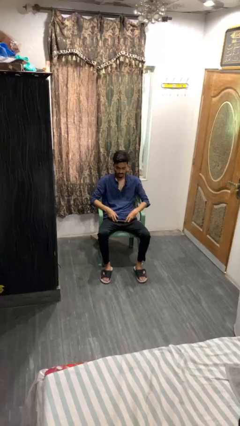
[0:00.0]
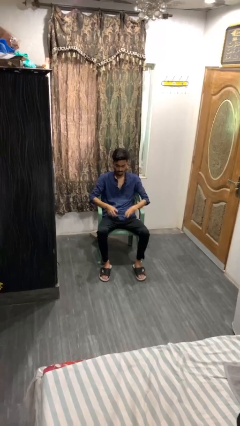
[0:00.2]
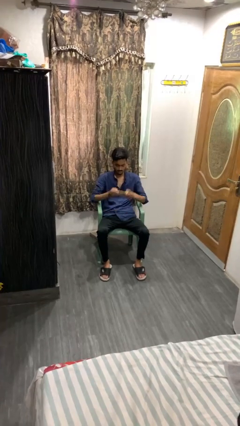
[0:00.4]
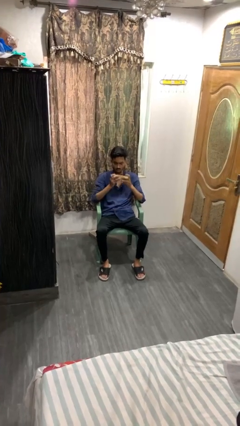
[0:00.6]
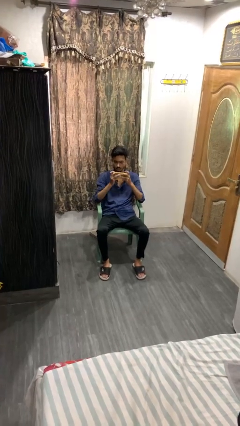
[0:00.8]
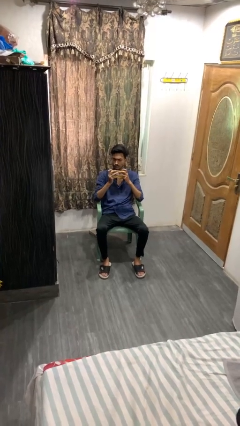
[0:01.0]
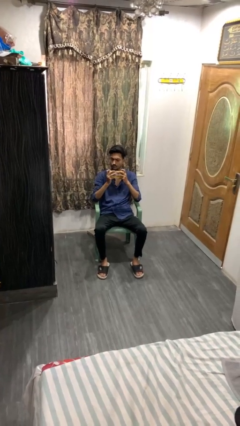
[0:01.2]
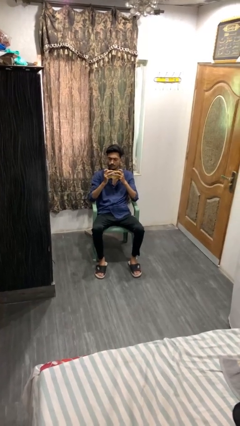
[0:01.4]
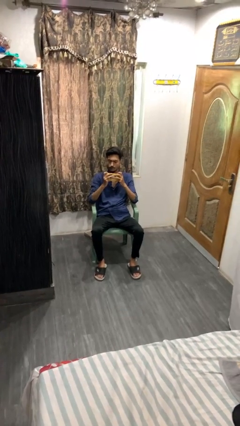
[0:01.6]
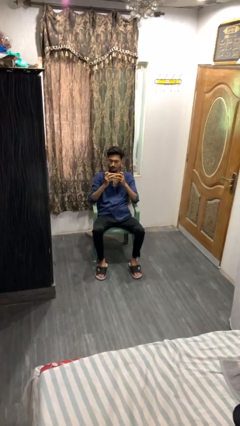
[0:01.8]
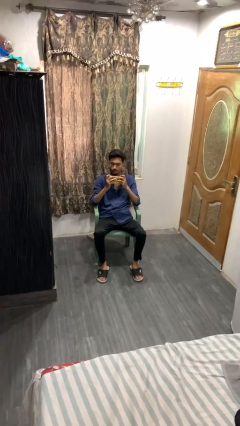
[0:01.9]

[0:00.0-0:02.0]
person interacts with handheld game

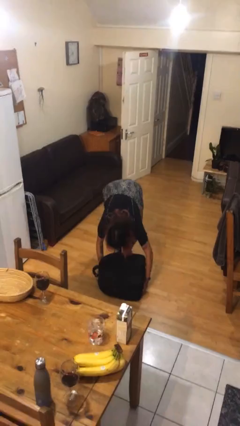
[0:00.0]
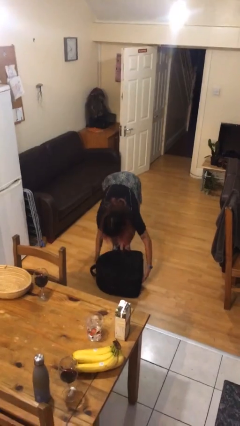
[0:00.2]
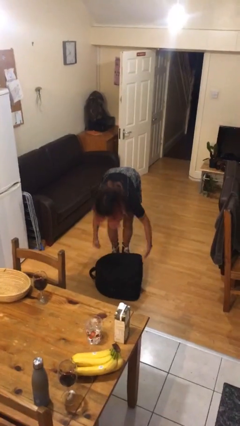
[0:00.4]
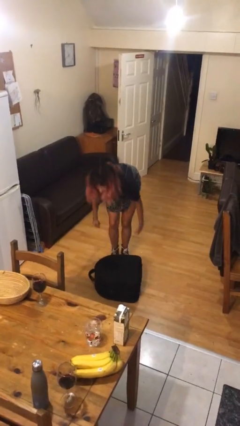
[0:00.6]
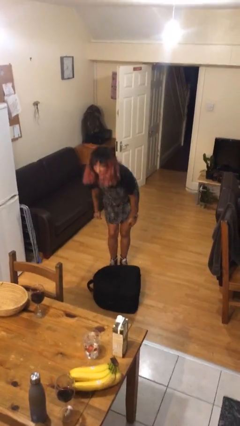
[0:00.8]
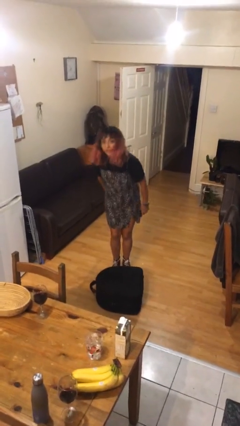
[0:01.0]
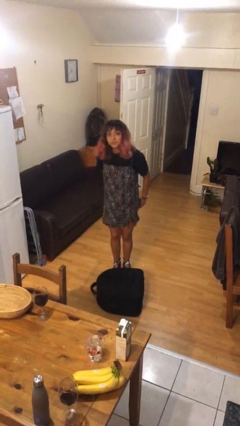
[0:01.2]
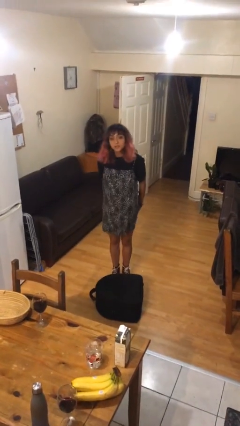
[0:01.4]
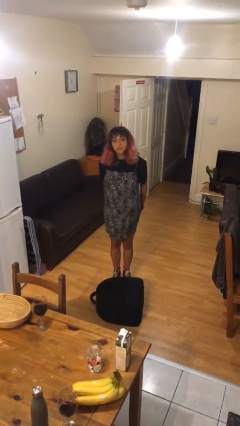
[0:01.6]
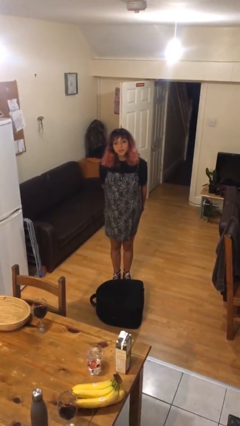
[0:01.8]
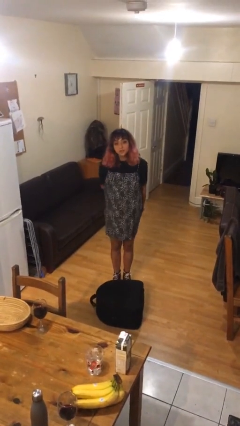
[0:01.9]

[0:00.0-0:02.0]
person puts down object on floor

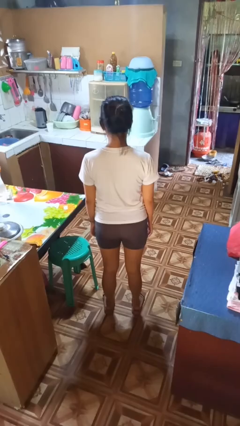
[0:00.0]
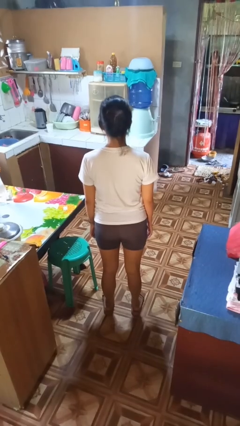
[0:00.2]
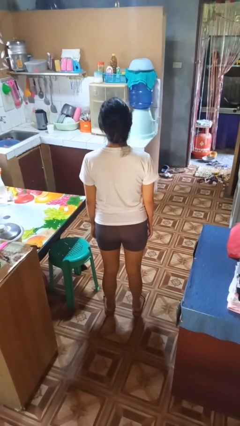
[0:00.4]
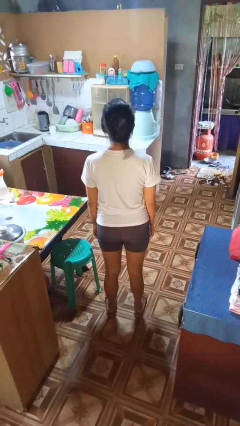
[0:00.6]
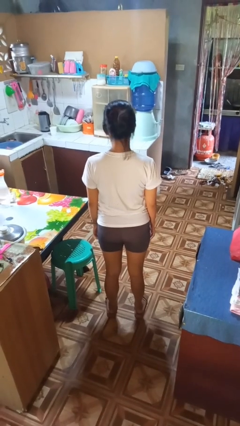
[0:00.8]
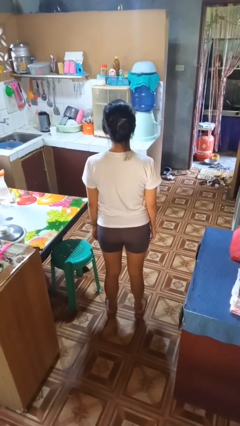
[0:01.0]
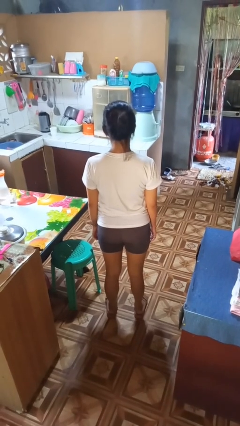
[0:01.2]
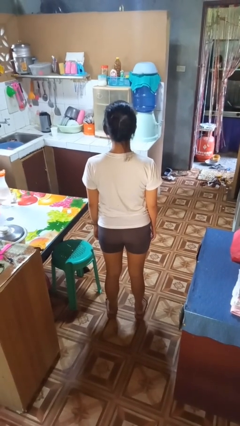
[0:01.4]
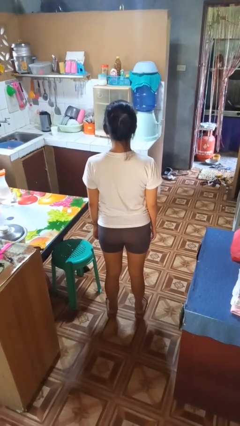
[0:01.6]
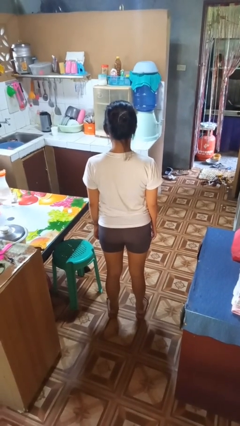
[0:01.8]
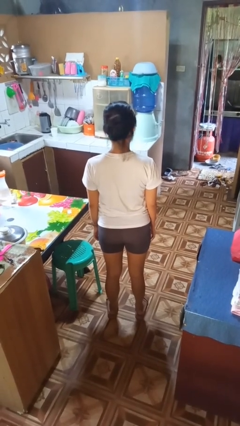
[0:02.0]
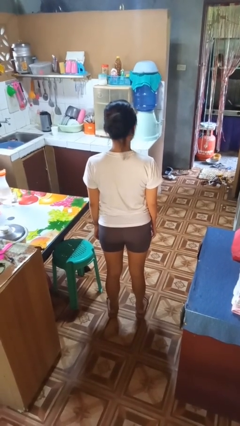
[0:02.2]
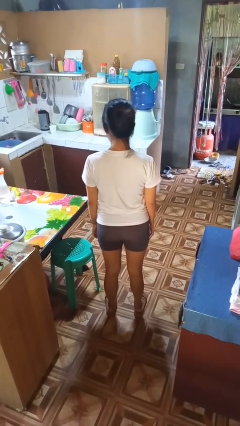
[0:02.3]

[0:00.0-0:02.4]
person nods head

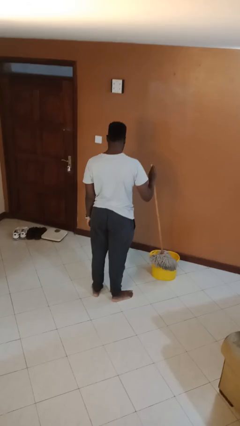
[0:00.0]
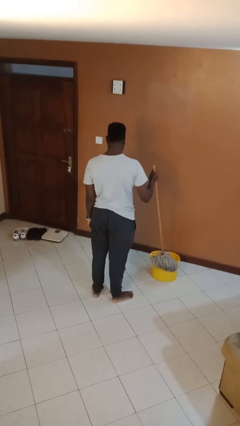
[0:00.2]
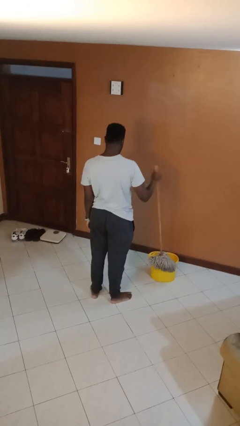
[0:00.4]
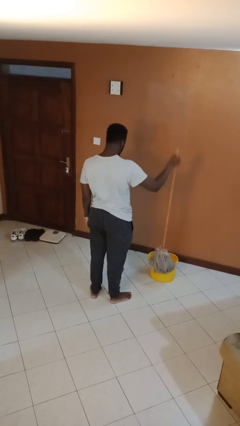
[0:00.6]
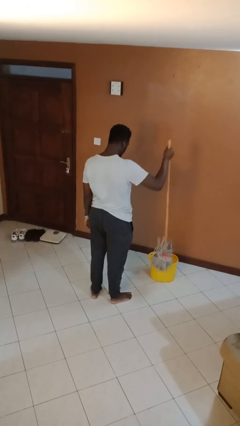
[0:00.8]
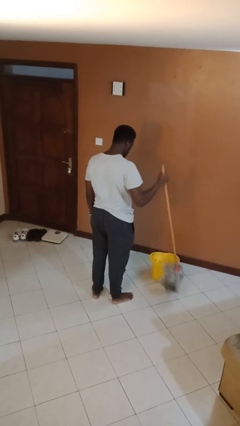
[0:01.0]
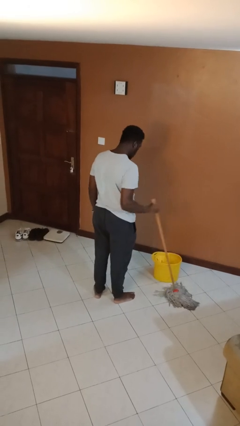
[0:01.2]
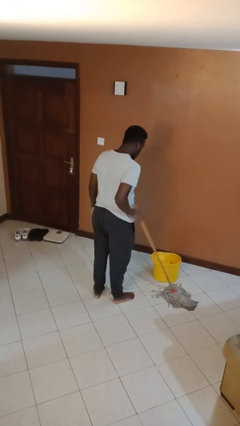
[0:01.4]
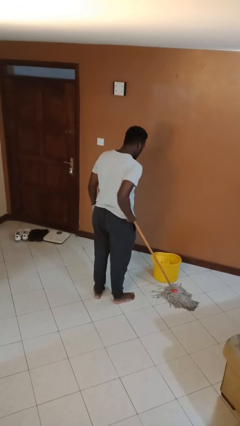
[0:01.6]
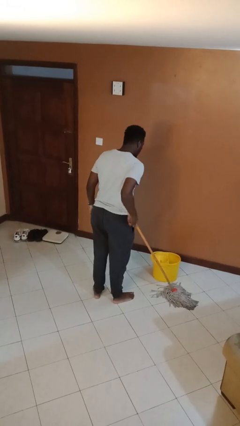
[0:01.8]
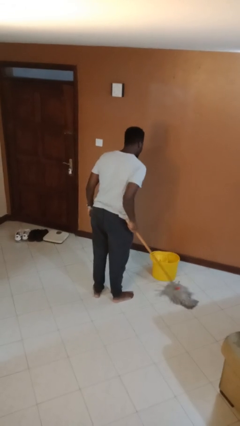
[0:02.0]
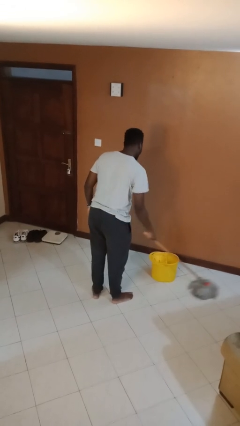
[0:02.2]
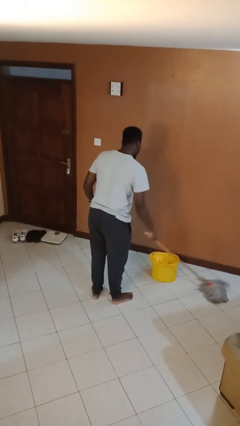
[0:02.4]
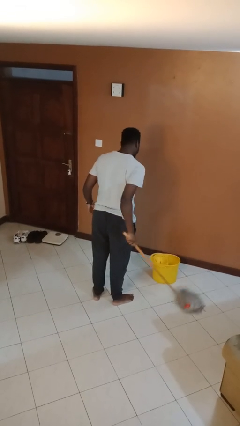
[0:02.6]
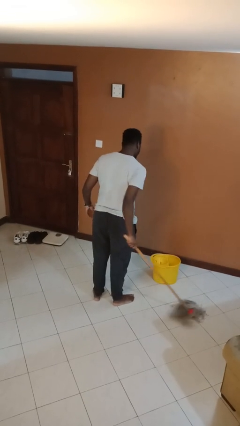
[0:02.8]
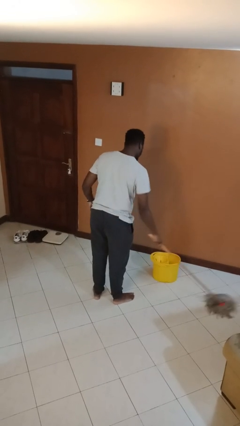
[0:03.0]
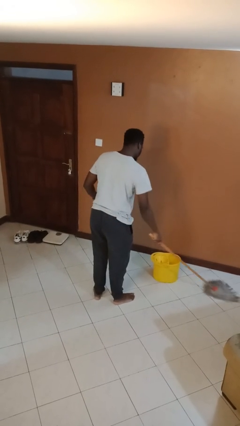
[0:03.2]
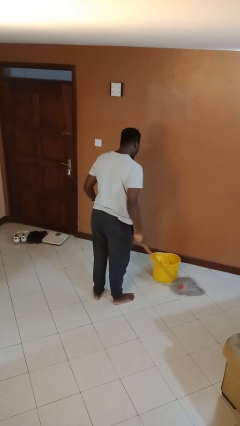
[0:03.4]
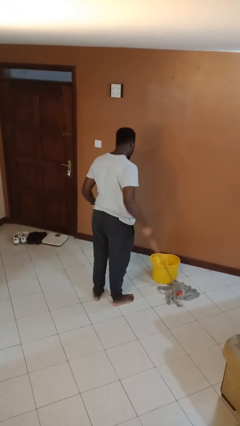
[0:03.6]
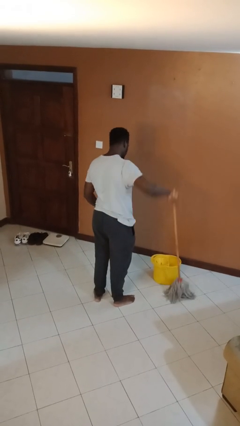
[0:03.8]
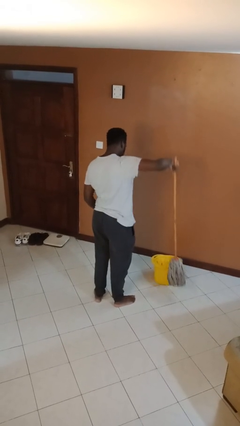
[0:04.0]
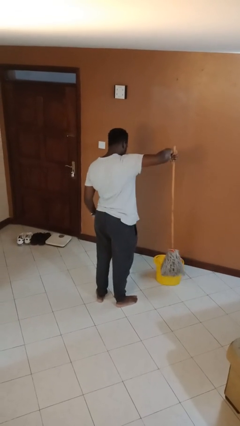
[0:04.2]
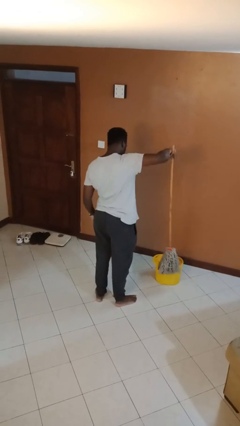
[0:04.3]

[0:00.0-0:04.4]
person mops

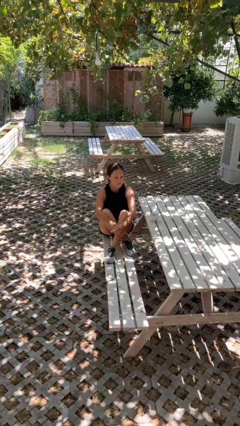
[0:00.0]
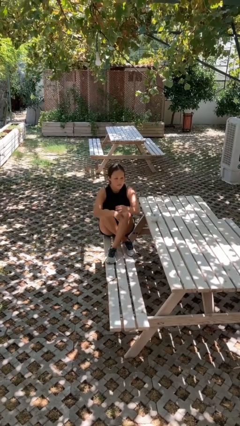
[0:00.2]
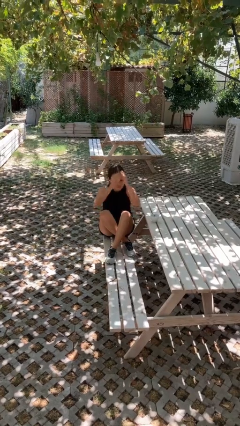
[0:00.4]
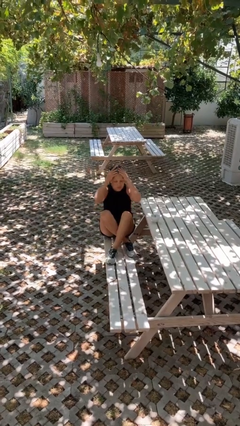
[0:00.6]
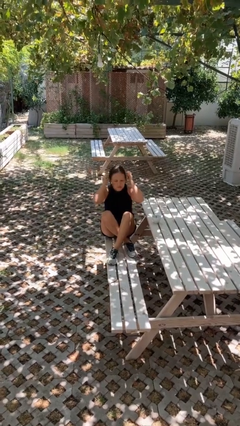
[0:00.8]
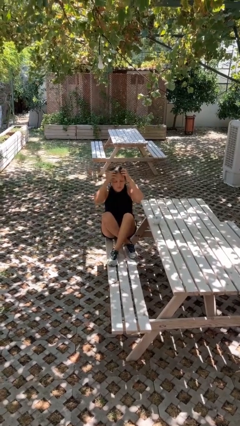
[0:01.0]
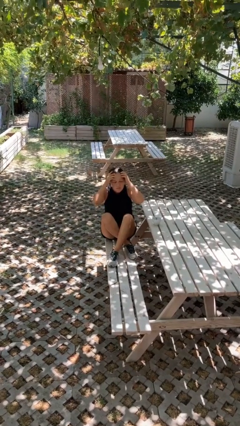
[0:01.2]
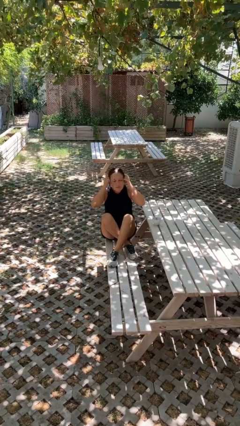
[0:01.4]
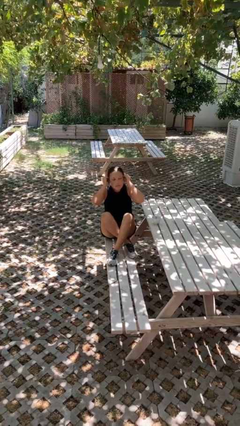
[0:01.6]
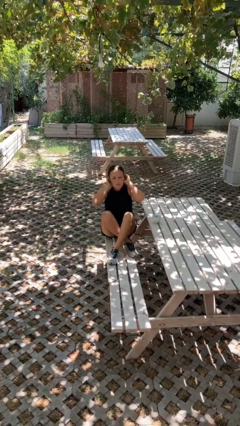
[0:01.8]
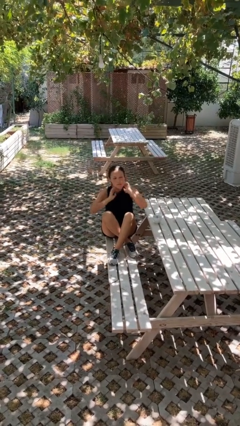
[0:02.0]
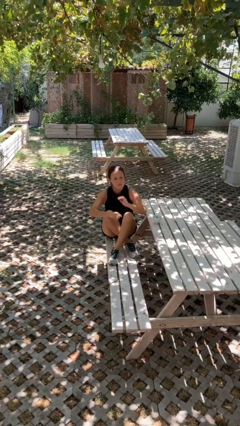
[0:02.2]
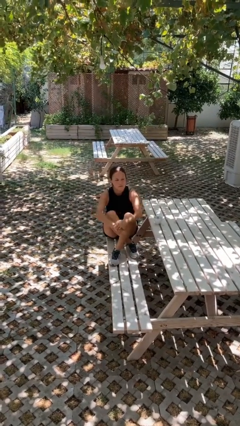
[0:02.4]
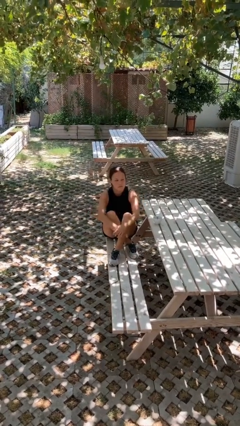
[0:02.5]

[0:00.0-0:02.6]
person strokes hair

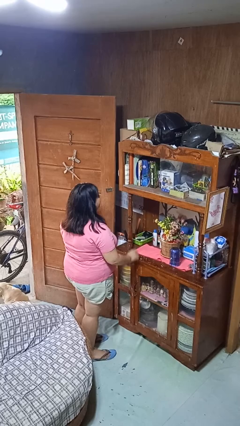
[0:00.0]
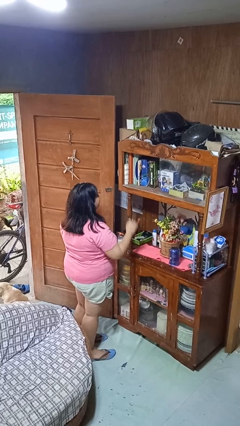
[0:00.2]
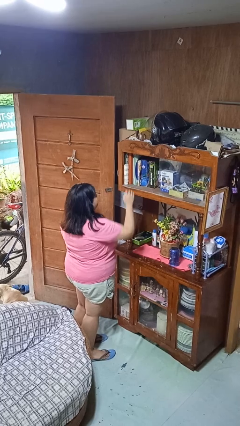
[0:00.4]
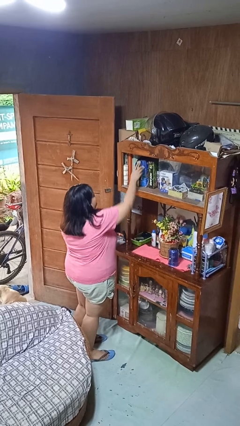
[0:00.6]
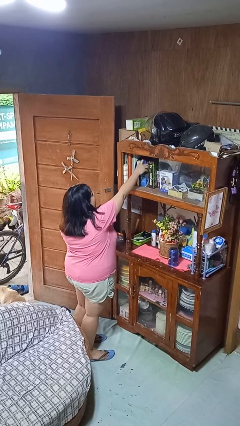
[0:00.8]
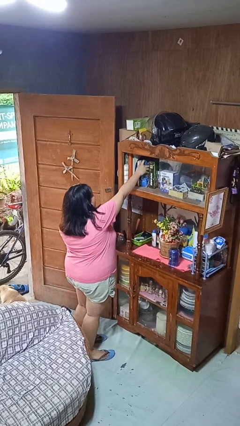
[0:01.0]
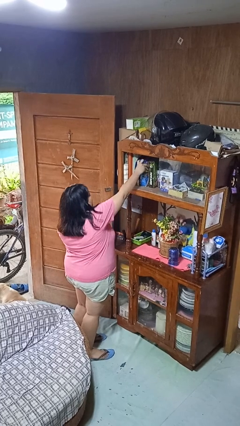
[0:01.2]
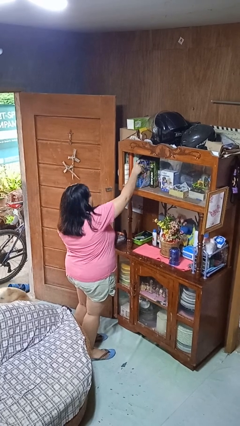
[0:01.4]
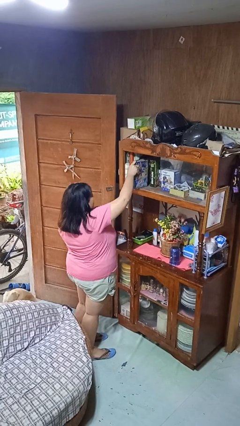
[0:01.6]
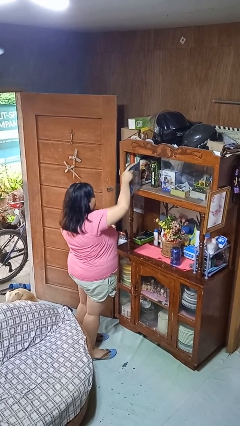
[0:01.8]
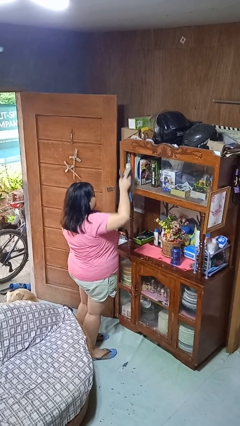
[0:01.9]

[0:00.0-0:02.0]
person picks up object from shelf

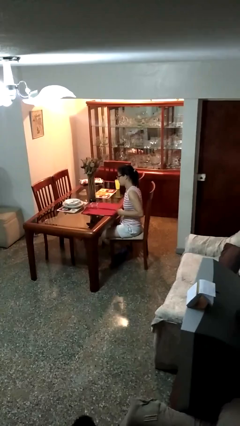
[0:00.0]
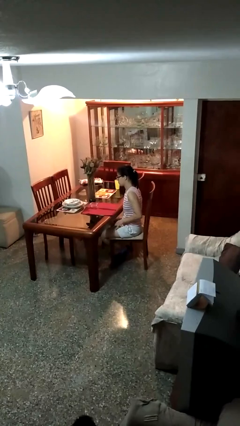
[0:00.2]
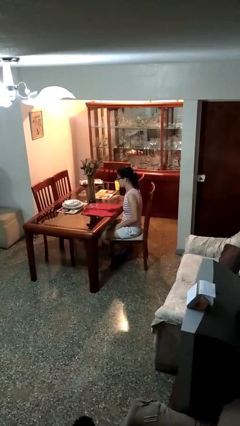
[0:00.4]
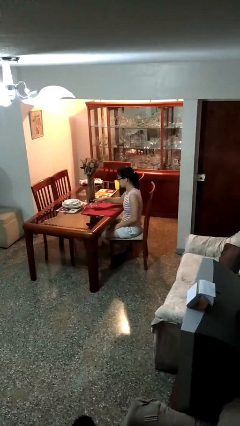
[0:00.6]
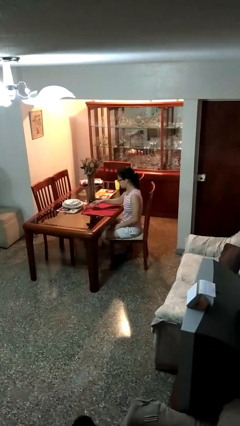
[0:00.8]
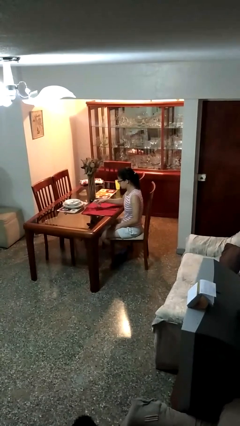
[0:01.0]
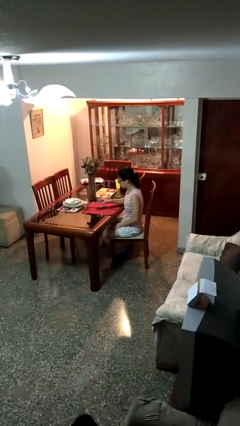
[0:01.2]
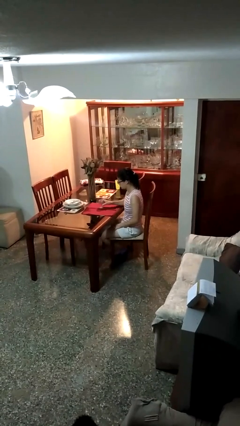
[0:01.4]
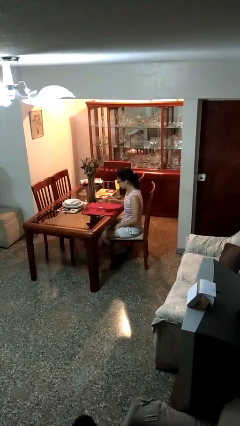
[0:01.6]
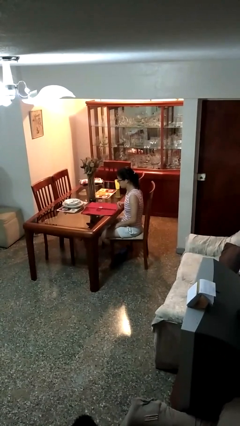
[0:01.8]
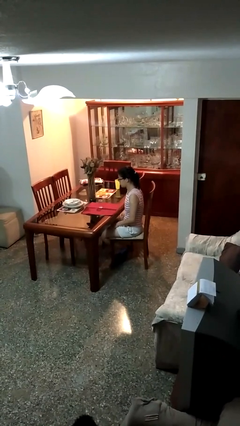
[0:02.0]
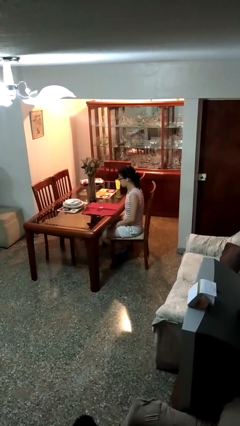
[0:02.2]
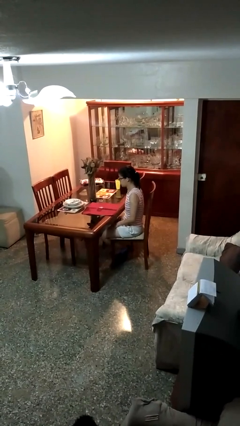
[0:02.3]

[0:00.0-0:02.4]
person sets upright glass
